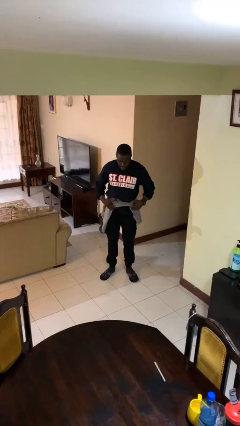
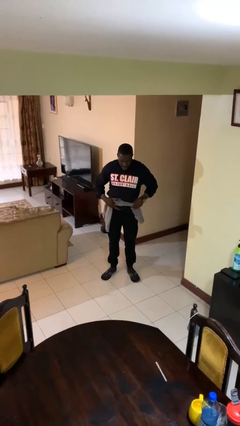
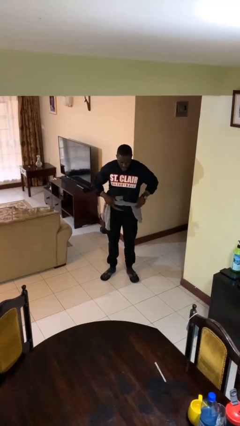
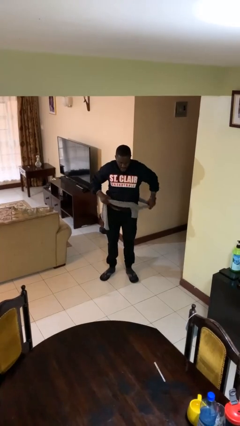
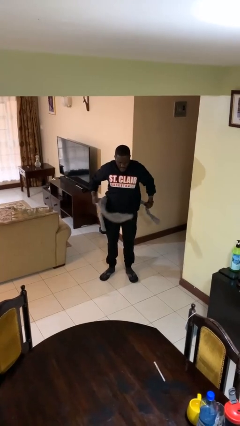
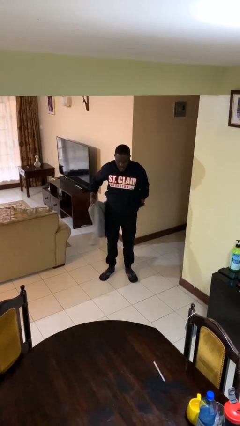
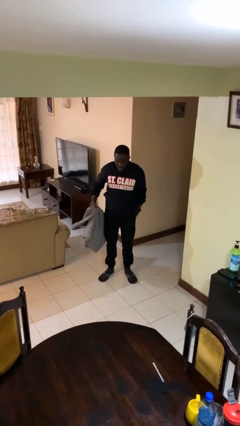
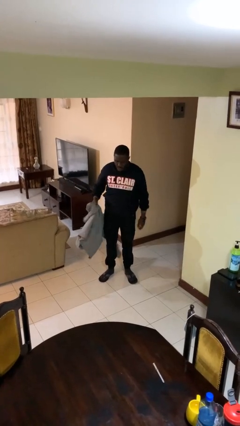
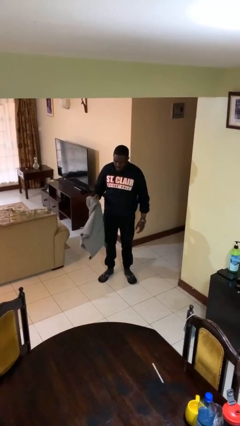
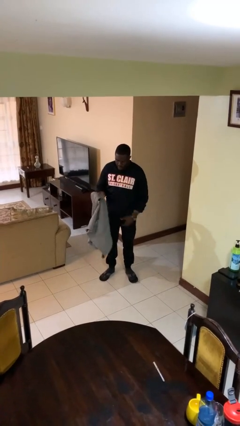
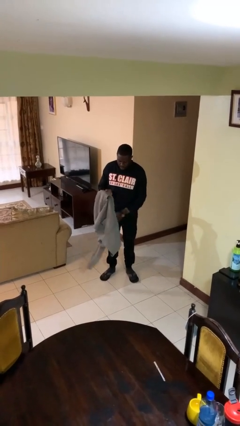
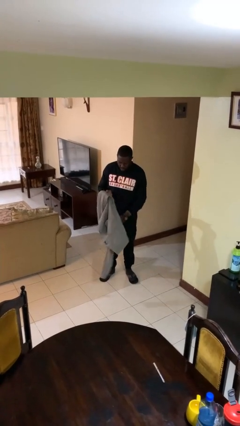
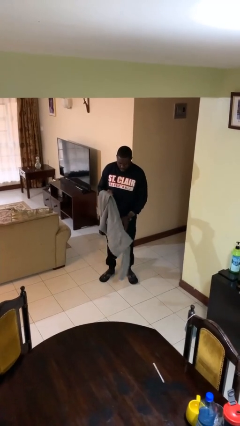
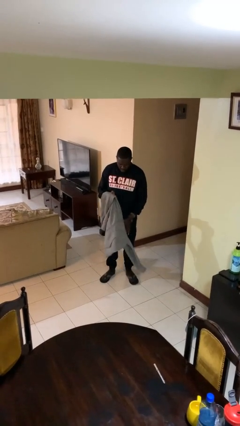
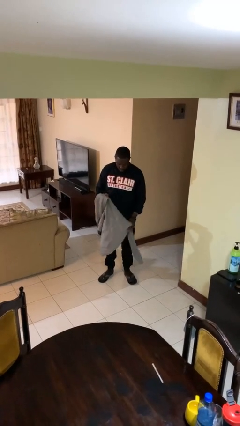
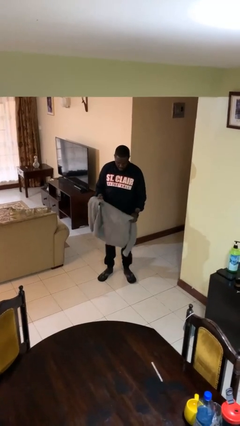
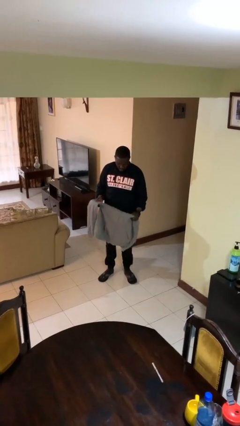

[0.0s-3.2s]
person unties jacket around waist

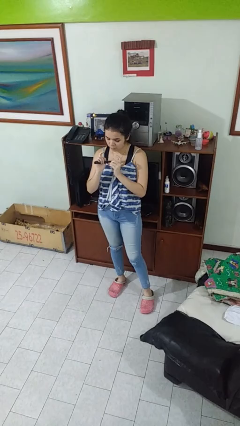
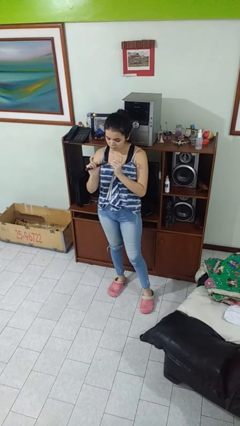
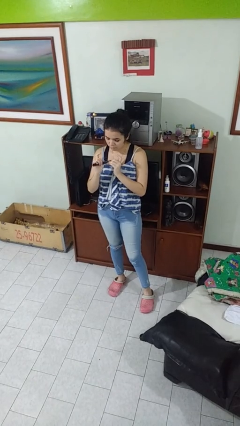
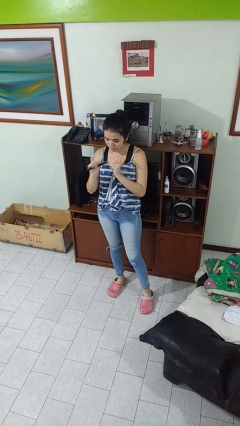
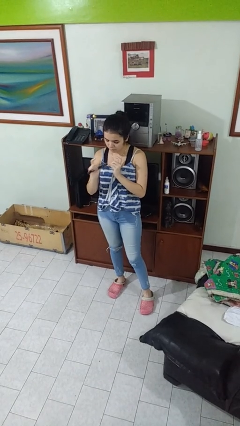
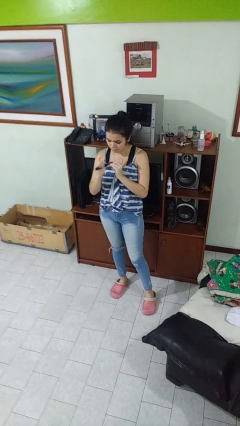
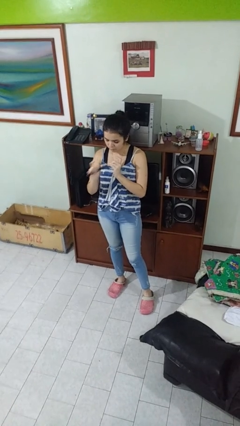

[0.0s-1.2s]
person files fingernails

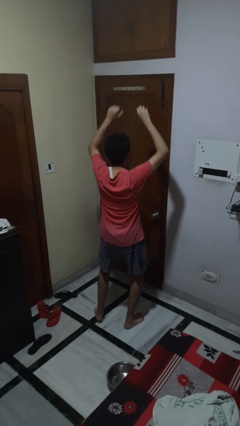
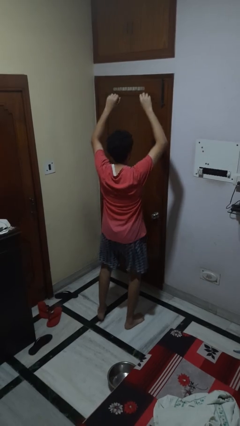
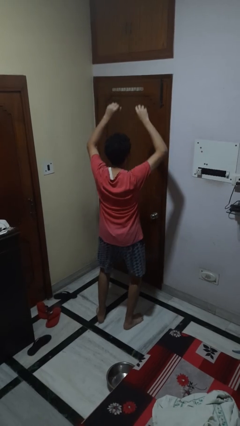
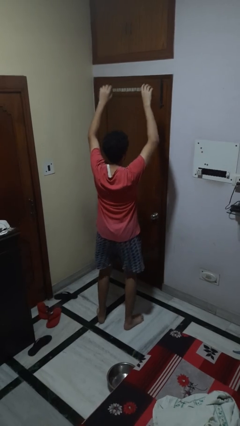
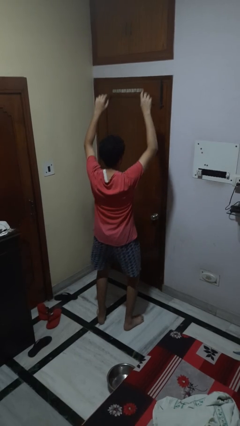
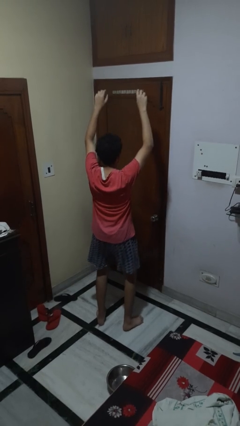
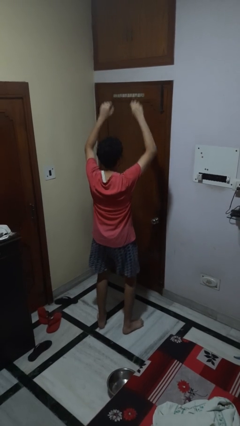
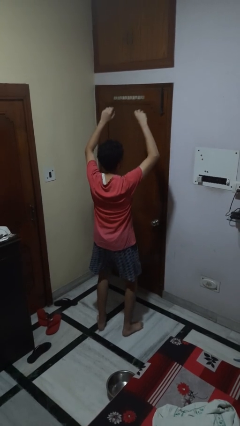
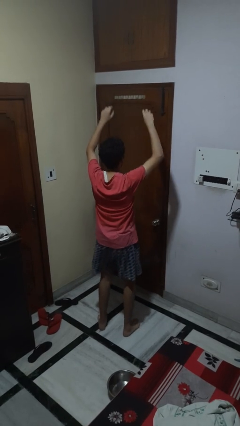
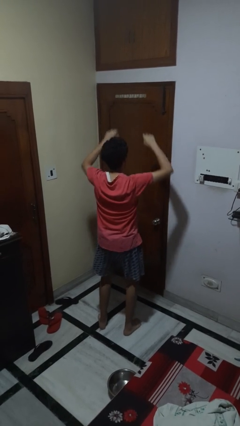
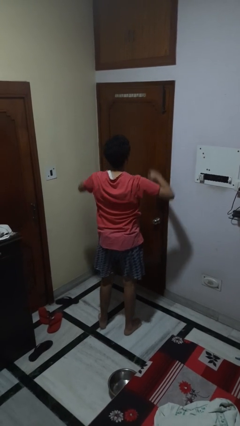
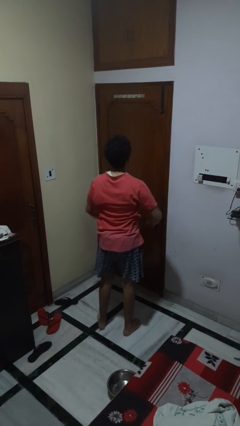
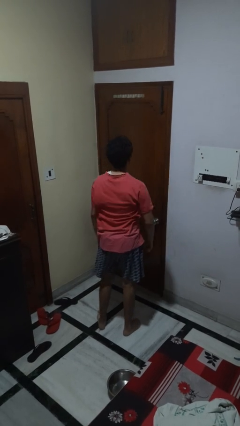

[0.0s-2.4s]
person dances in place

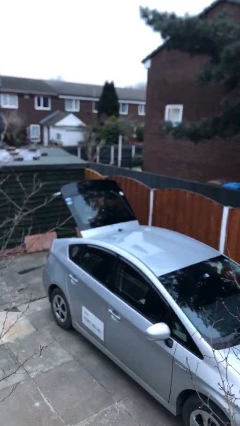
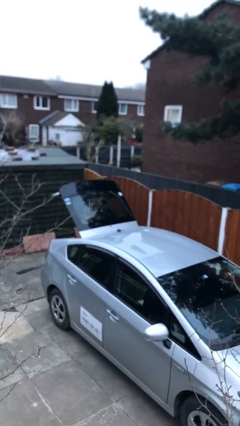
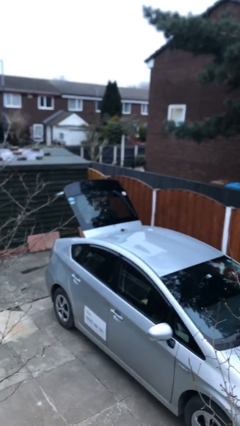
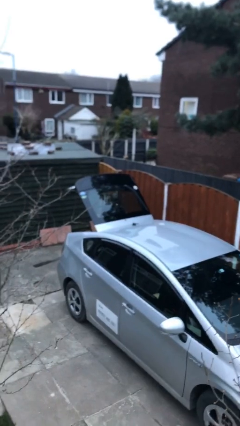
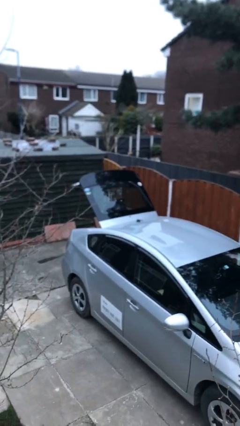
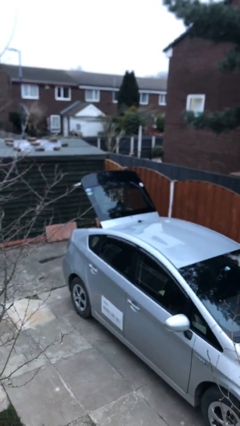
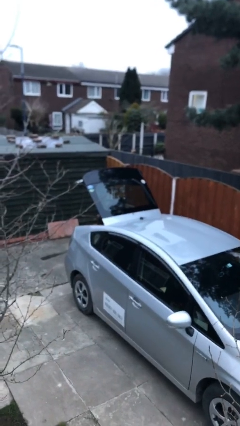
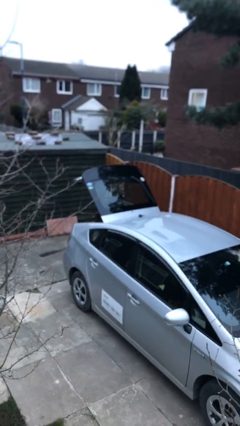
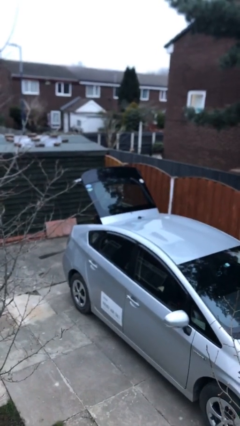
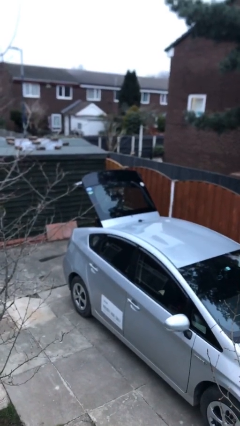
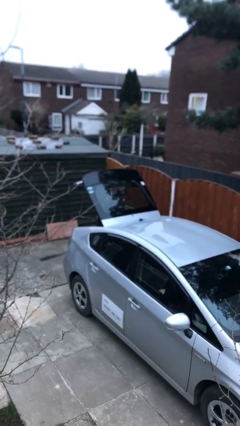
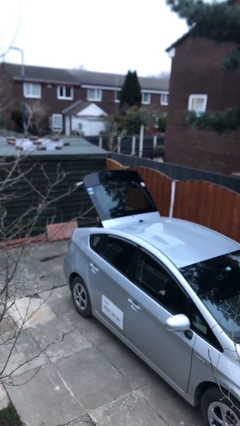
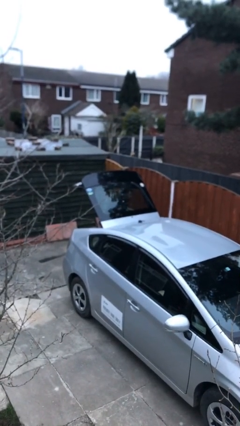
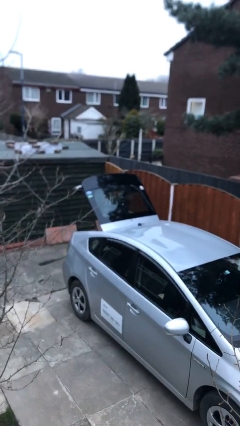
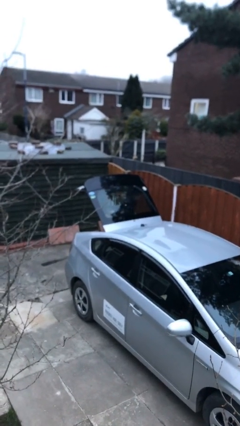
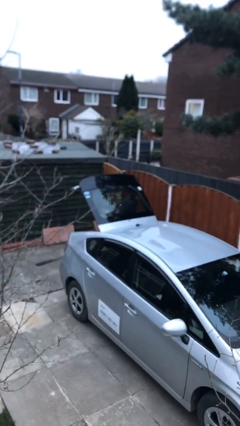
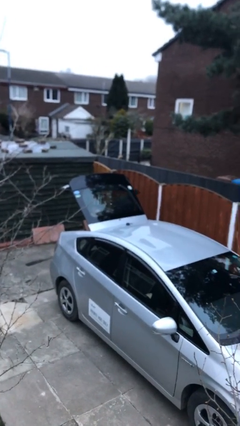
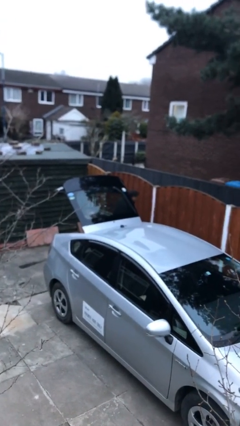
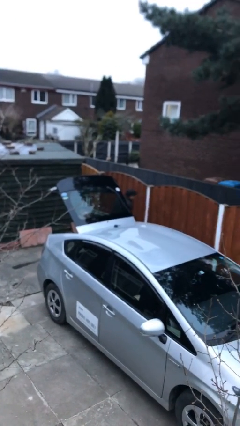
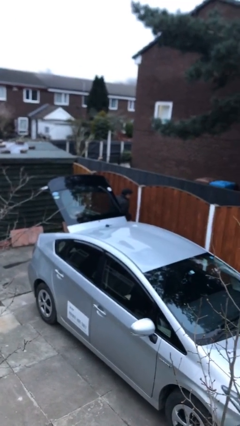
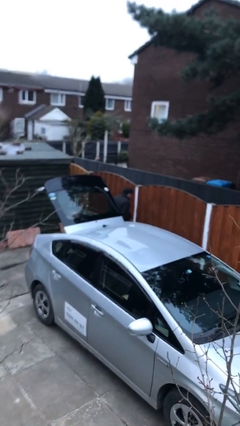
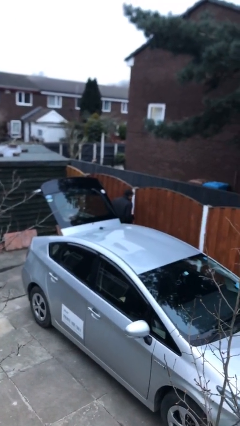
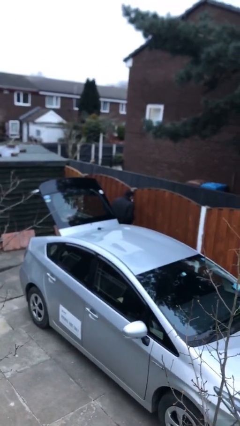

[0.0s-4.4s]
person unloads car

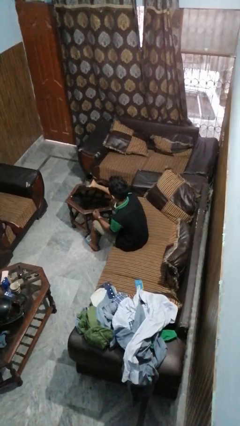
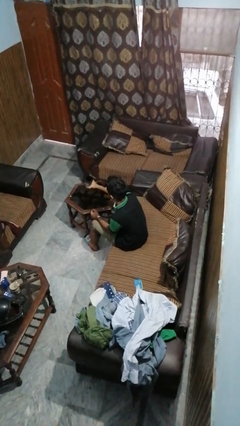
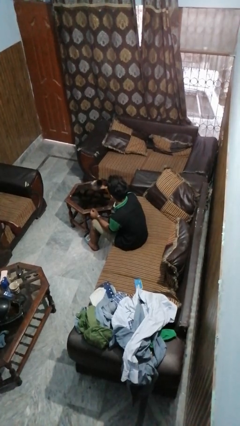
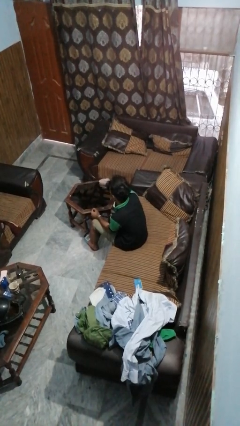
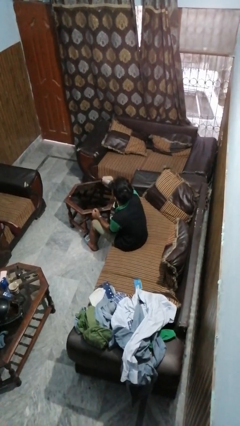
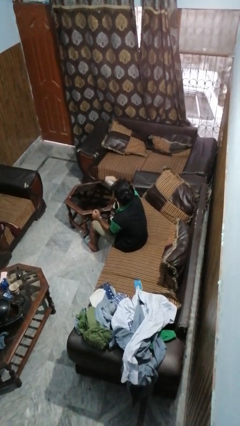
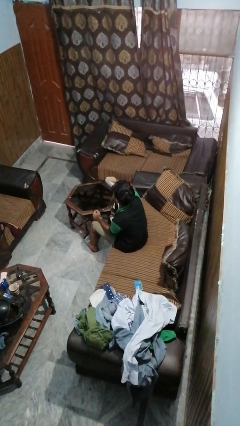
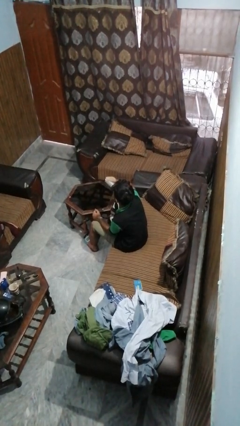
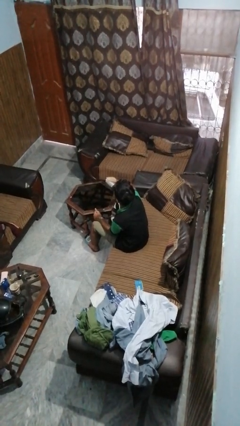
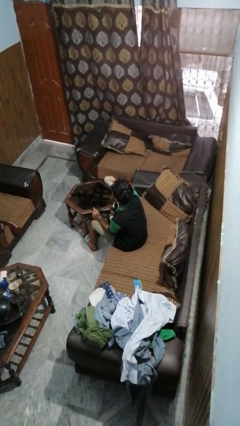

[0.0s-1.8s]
person drinks from mug

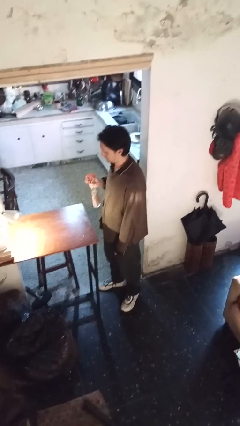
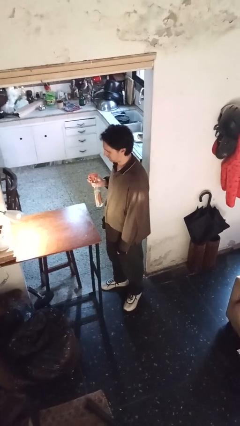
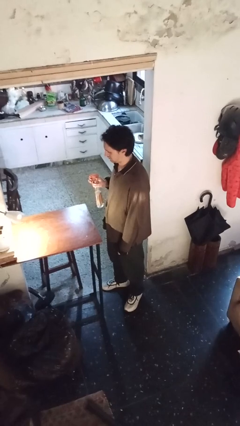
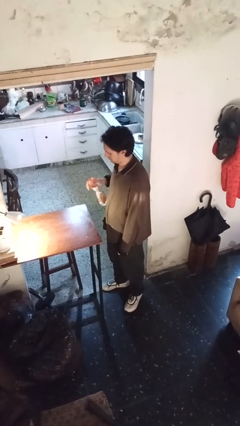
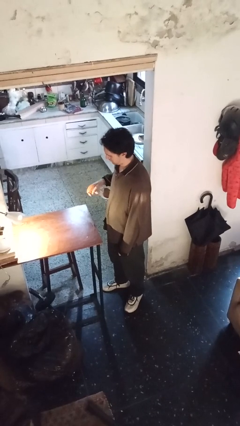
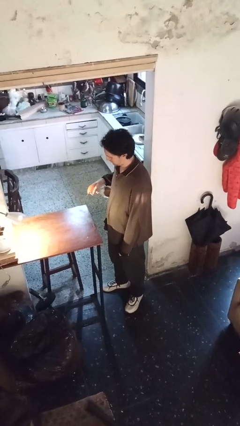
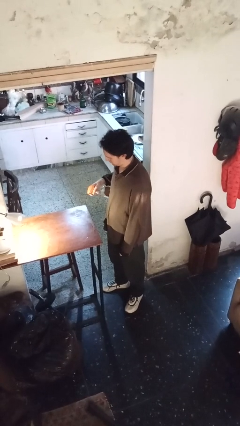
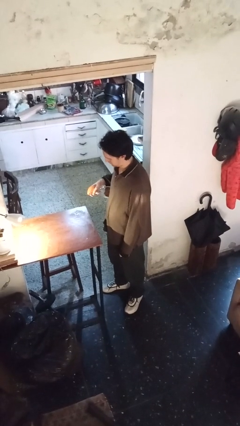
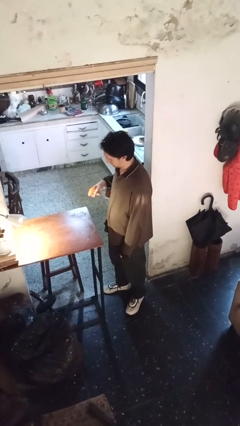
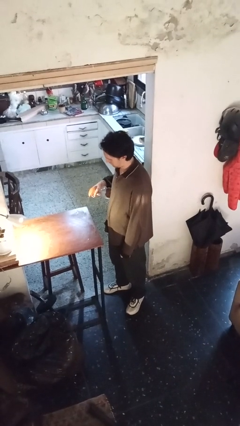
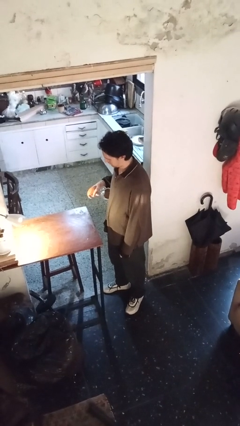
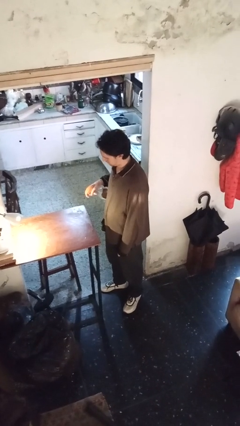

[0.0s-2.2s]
person sprays from bottle

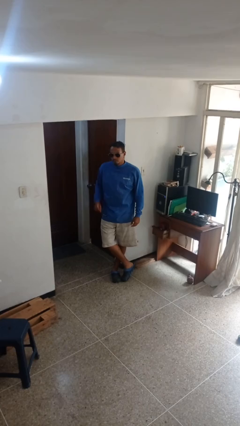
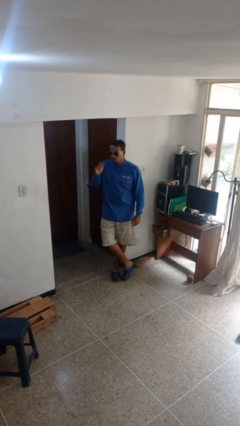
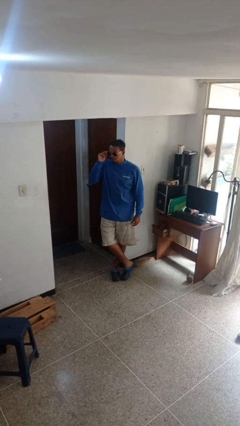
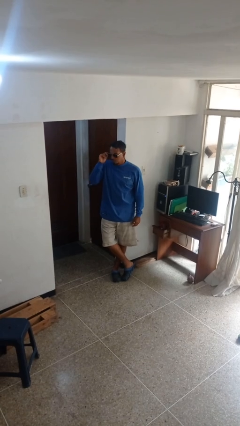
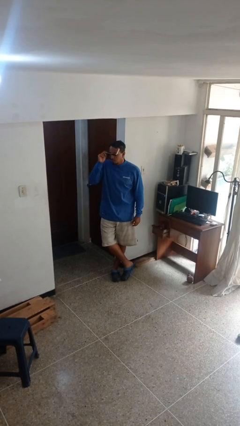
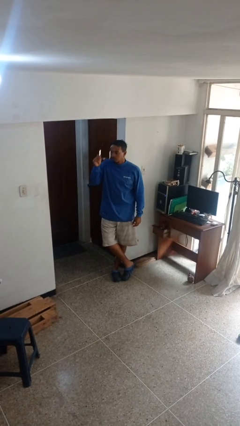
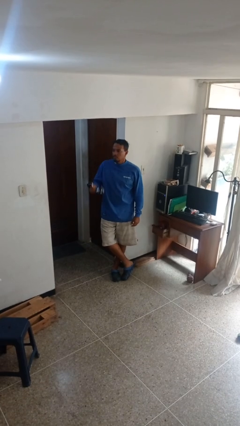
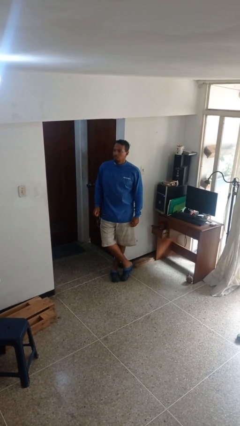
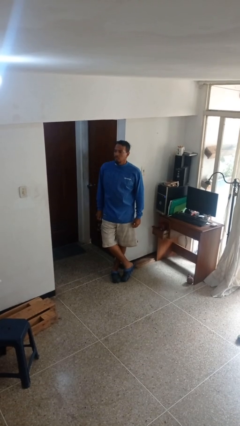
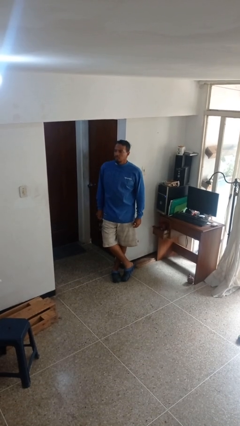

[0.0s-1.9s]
person takes off sunglasses
